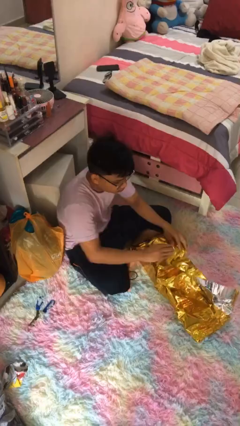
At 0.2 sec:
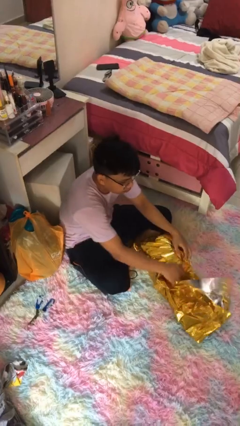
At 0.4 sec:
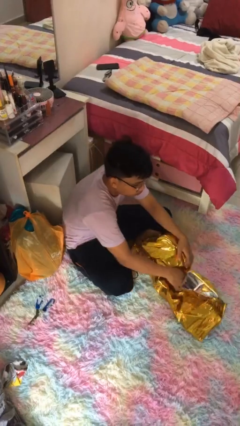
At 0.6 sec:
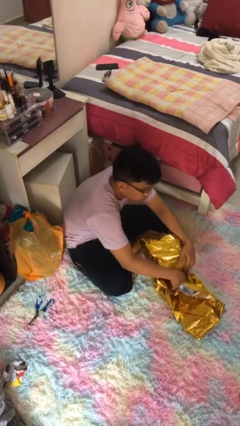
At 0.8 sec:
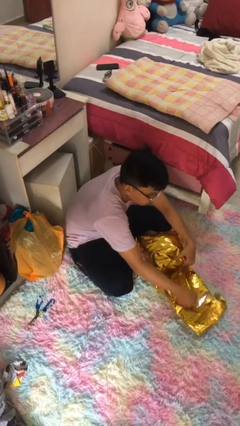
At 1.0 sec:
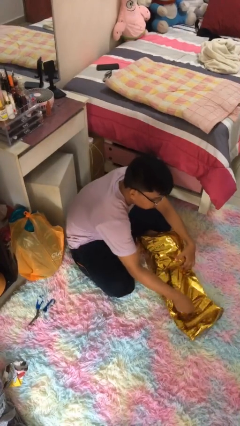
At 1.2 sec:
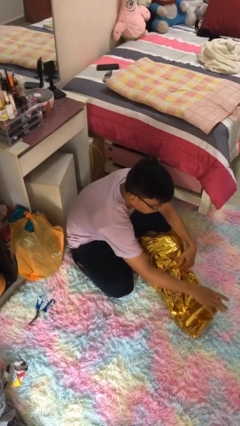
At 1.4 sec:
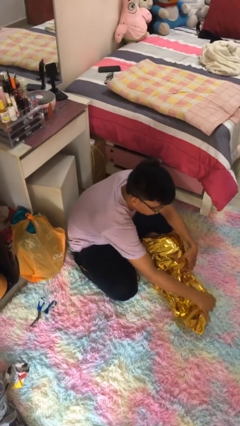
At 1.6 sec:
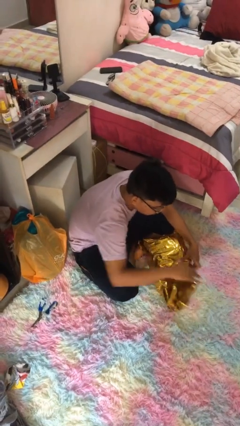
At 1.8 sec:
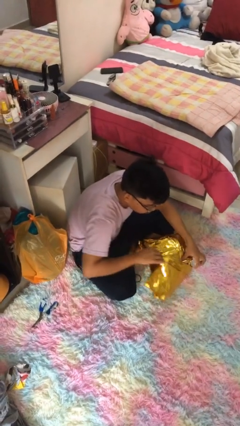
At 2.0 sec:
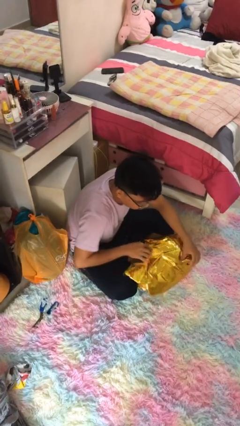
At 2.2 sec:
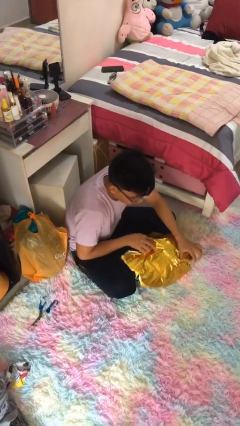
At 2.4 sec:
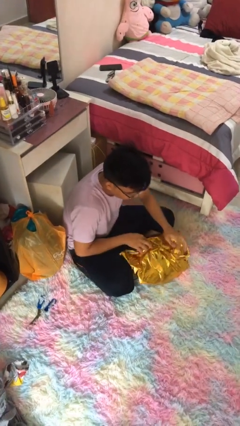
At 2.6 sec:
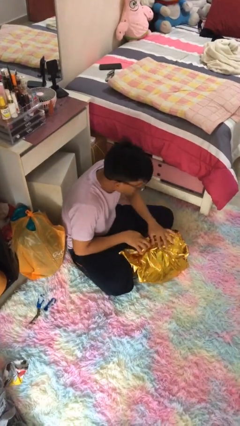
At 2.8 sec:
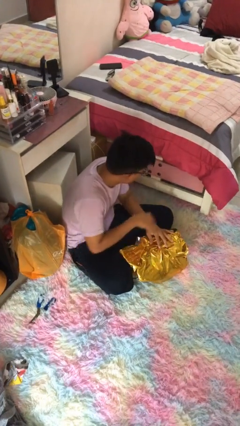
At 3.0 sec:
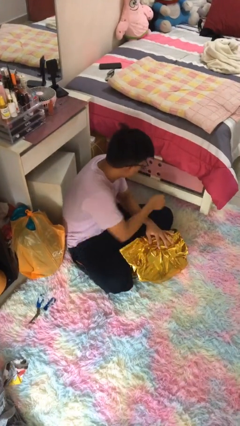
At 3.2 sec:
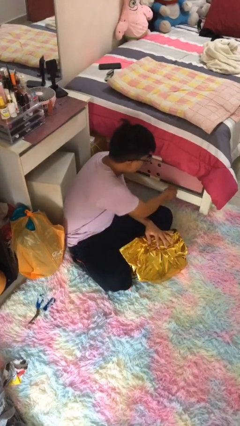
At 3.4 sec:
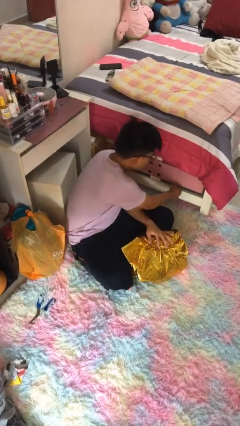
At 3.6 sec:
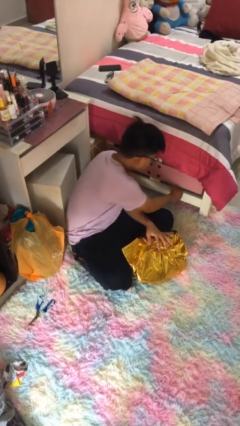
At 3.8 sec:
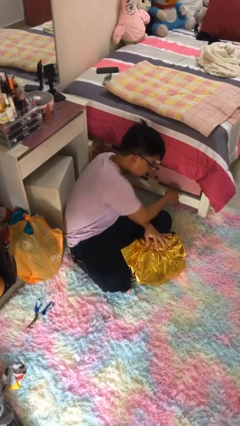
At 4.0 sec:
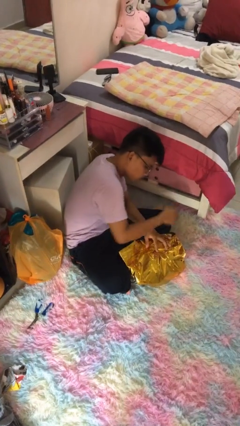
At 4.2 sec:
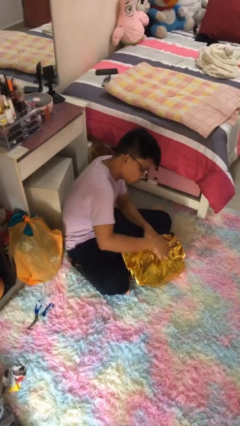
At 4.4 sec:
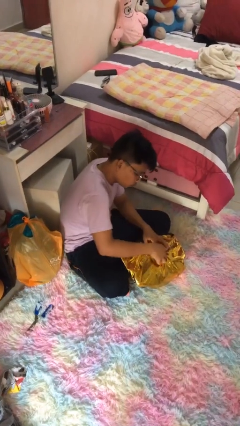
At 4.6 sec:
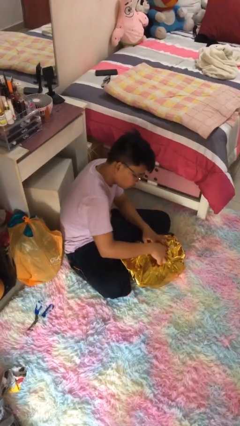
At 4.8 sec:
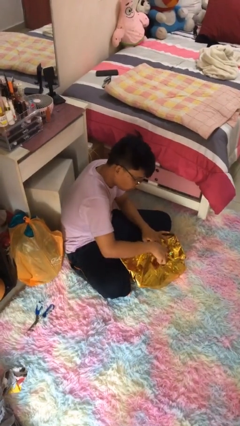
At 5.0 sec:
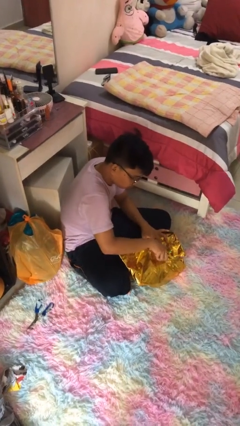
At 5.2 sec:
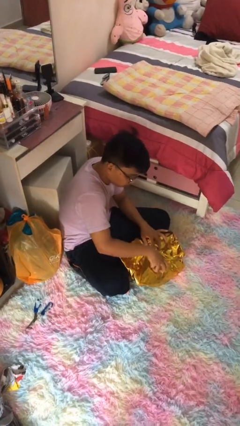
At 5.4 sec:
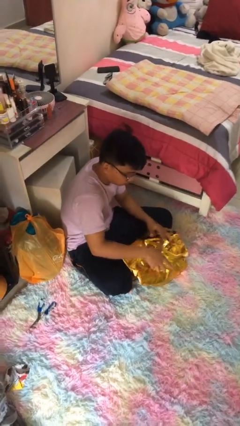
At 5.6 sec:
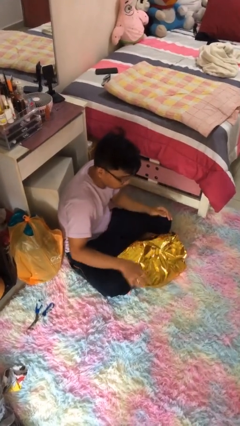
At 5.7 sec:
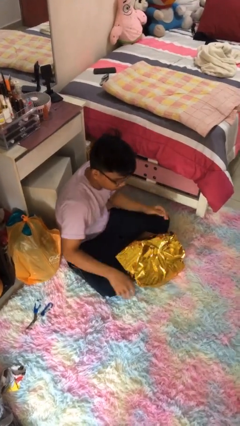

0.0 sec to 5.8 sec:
person wraps box

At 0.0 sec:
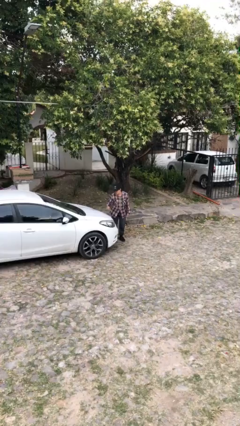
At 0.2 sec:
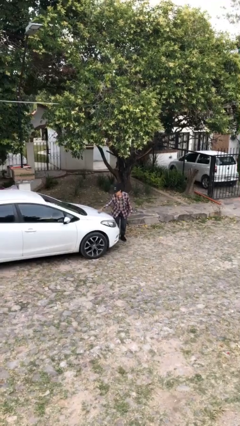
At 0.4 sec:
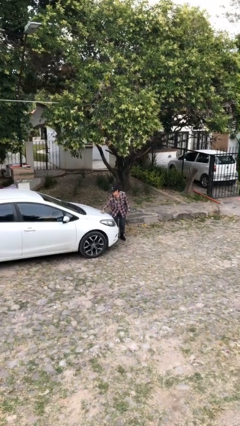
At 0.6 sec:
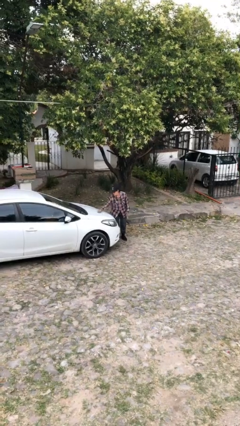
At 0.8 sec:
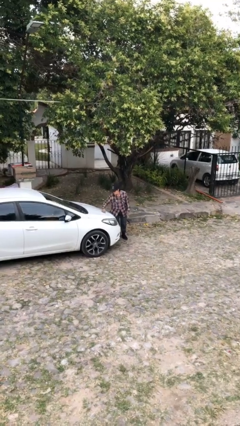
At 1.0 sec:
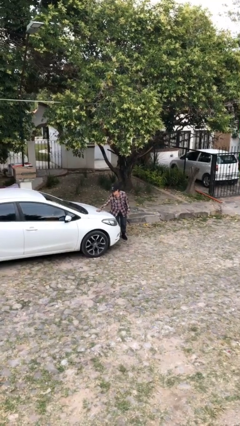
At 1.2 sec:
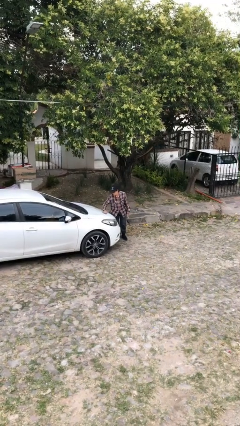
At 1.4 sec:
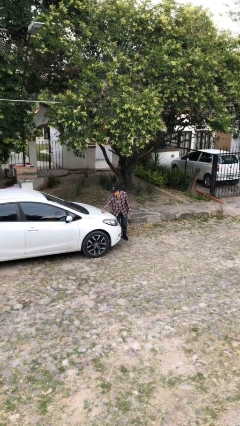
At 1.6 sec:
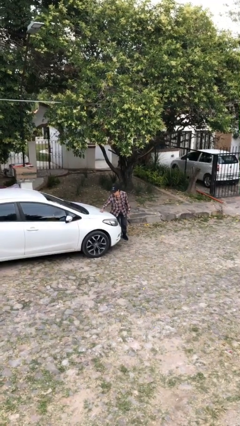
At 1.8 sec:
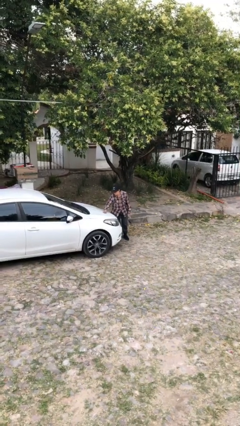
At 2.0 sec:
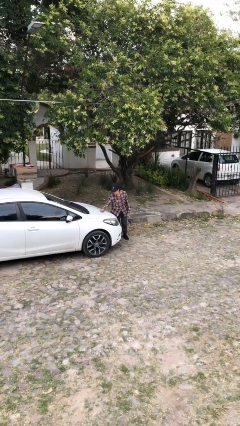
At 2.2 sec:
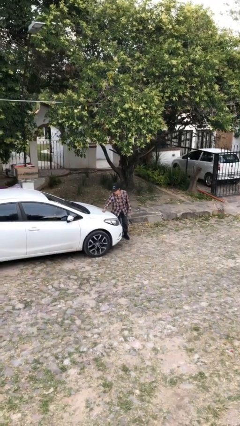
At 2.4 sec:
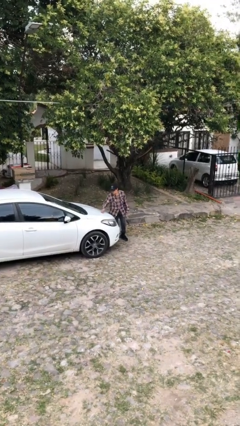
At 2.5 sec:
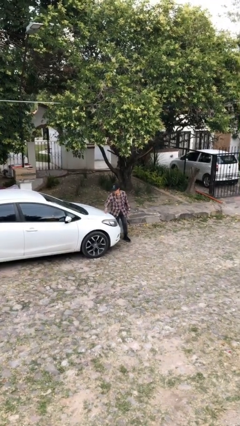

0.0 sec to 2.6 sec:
person polishes car with rag

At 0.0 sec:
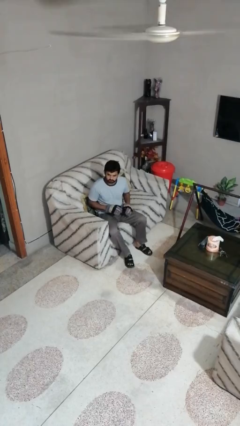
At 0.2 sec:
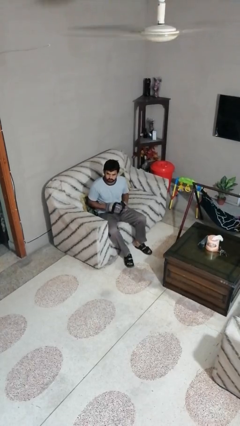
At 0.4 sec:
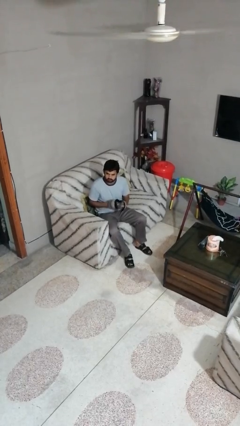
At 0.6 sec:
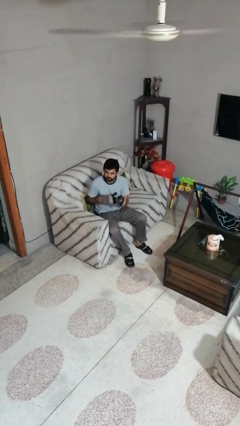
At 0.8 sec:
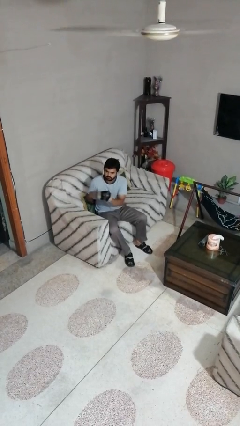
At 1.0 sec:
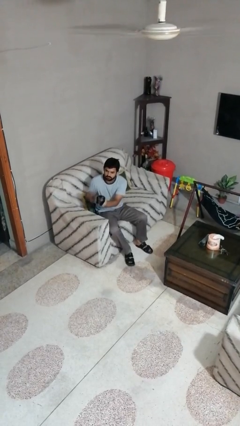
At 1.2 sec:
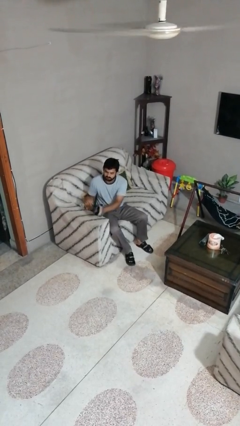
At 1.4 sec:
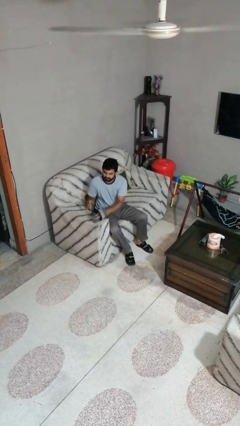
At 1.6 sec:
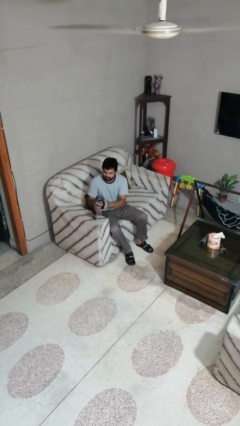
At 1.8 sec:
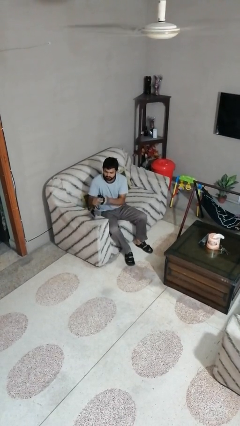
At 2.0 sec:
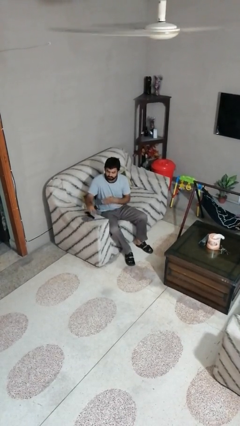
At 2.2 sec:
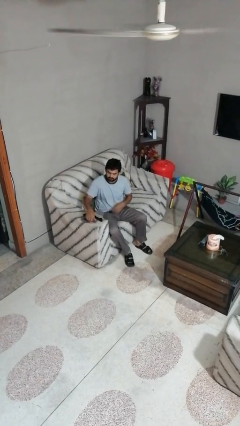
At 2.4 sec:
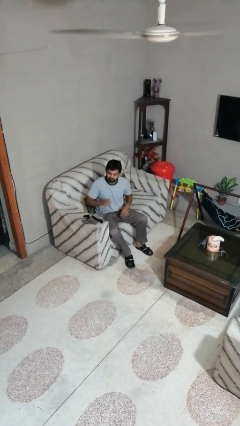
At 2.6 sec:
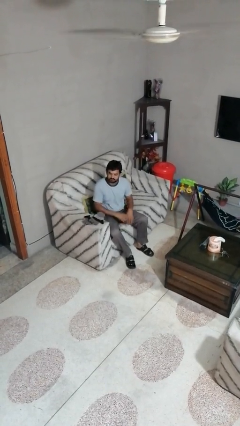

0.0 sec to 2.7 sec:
person takes off gloves

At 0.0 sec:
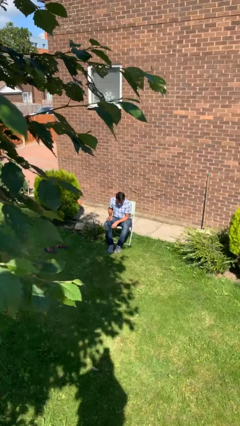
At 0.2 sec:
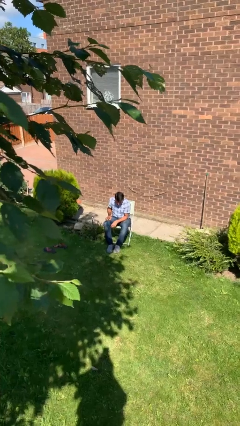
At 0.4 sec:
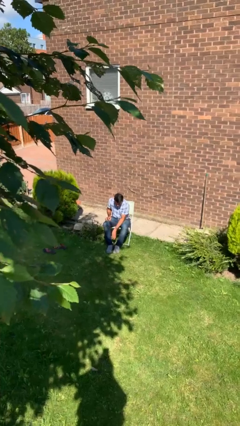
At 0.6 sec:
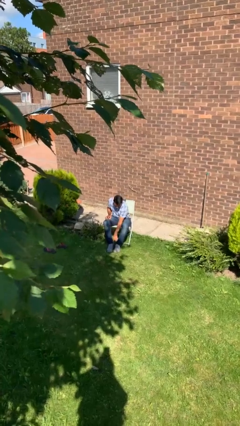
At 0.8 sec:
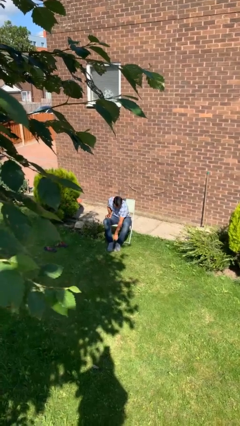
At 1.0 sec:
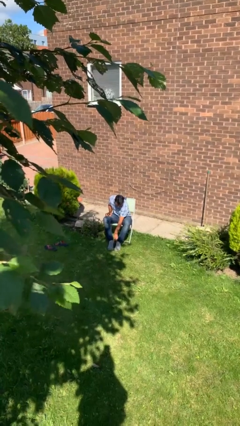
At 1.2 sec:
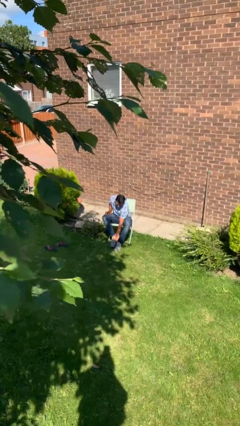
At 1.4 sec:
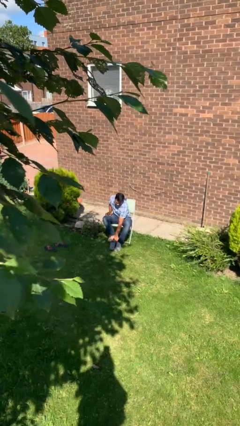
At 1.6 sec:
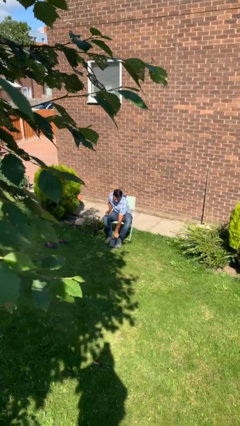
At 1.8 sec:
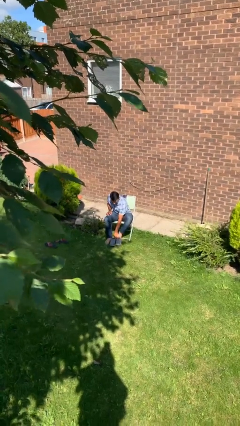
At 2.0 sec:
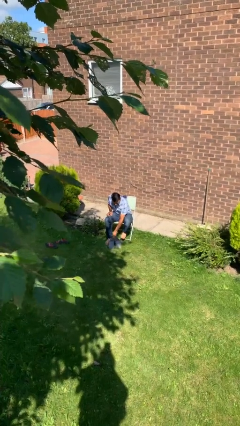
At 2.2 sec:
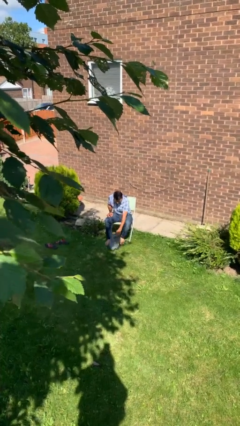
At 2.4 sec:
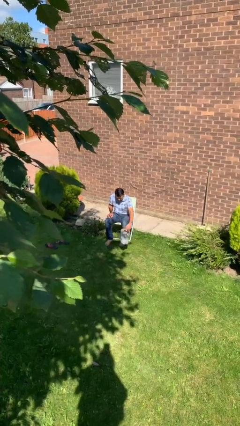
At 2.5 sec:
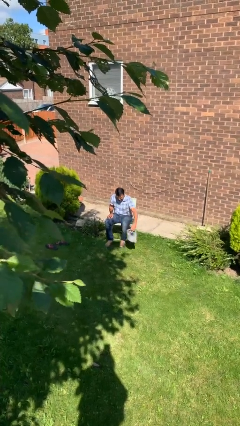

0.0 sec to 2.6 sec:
person takes off shoes

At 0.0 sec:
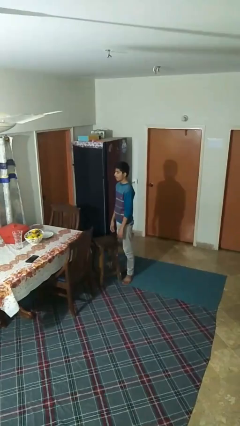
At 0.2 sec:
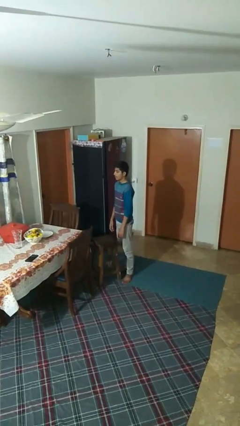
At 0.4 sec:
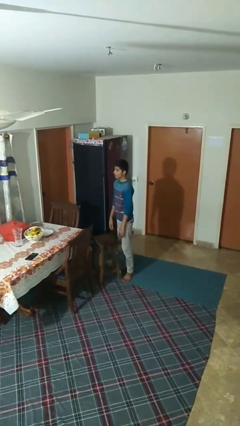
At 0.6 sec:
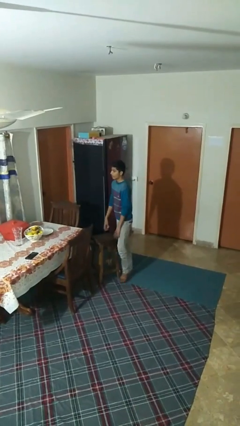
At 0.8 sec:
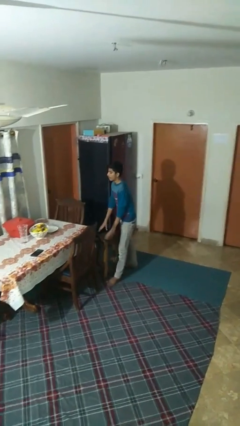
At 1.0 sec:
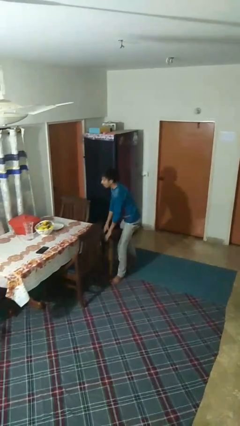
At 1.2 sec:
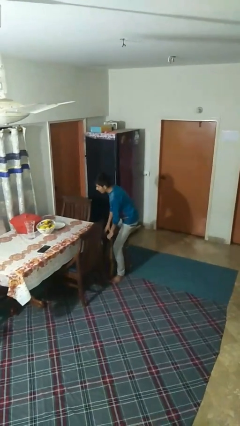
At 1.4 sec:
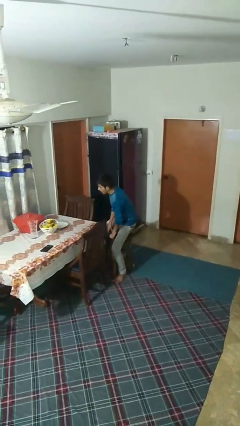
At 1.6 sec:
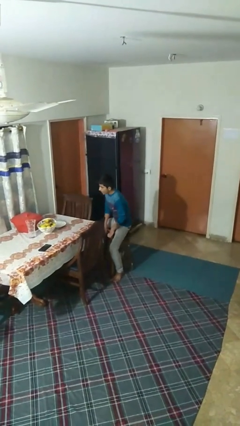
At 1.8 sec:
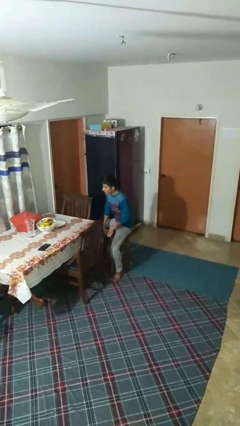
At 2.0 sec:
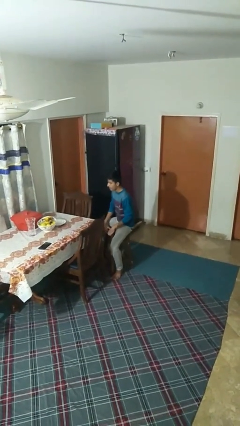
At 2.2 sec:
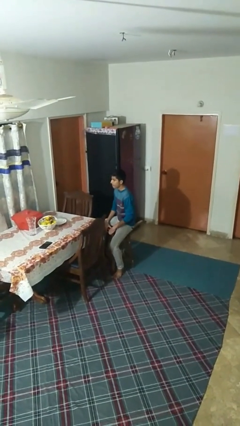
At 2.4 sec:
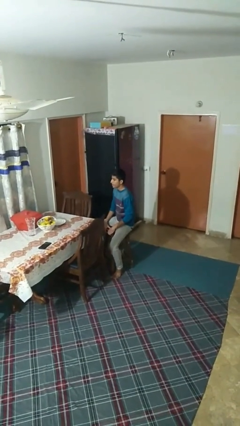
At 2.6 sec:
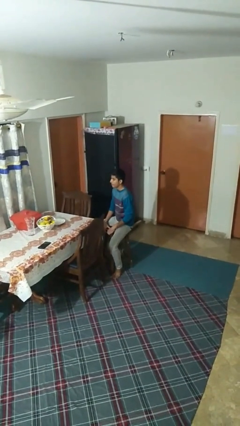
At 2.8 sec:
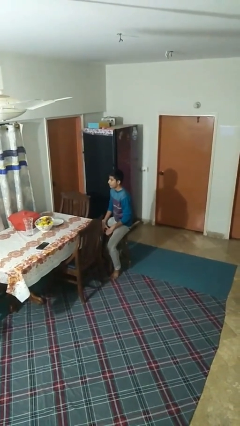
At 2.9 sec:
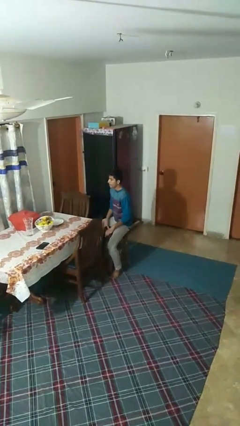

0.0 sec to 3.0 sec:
person sits down

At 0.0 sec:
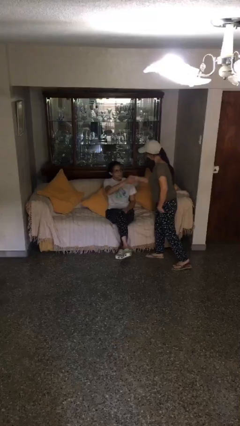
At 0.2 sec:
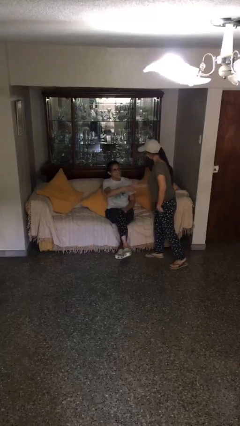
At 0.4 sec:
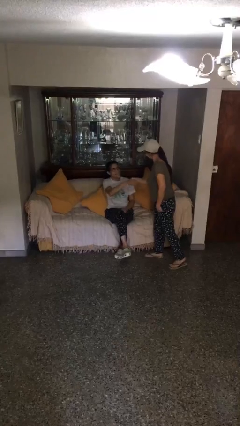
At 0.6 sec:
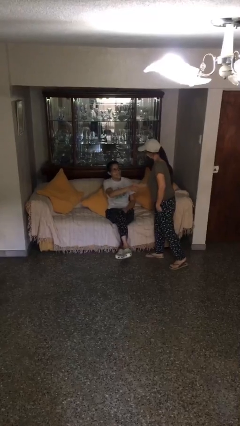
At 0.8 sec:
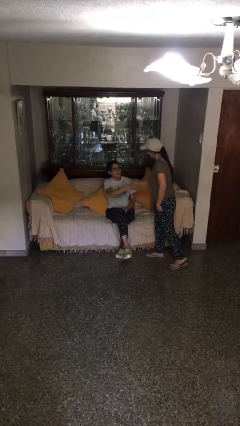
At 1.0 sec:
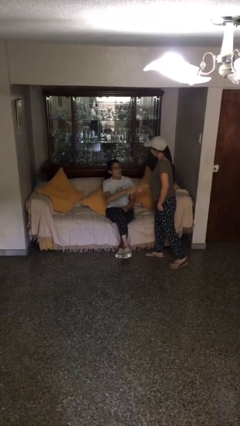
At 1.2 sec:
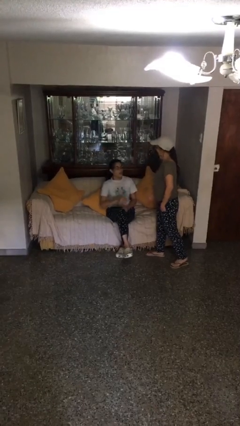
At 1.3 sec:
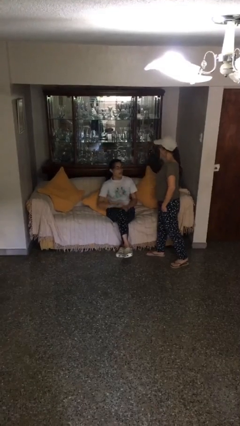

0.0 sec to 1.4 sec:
person shakes hand
